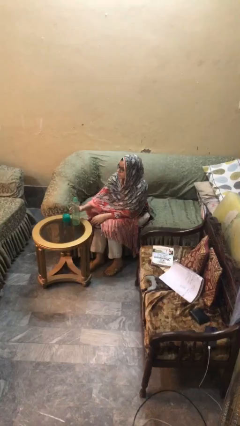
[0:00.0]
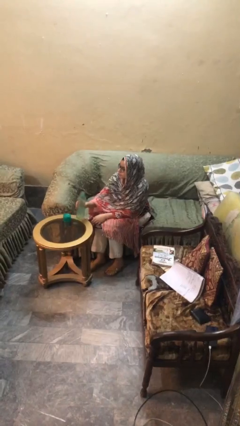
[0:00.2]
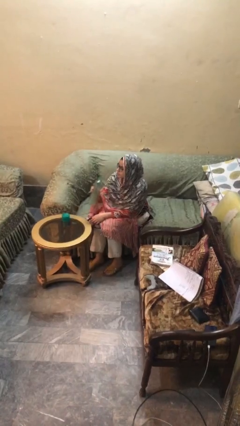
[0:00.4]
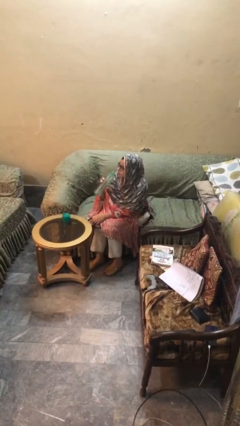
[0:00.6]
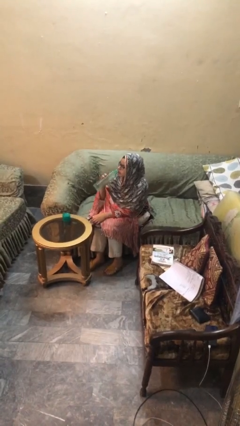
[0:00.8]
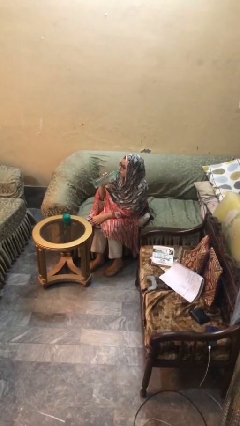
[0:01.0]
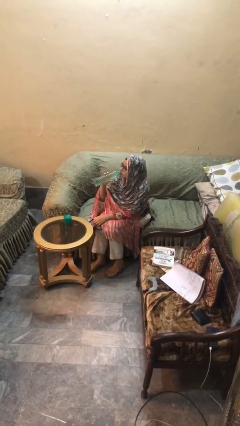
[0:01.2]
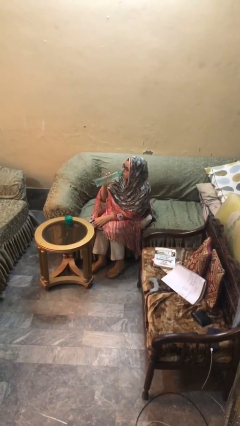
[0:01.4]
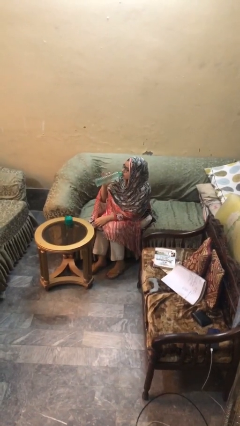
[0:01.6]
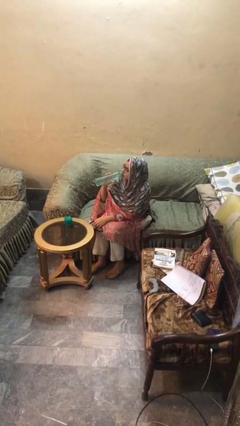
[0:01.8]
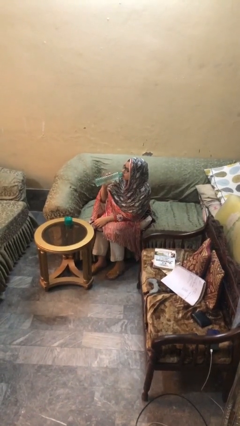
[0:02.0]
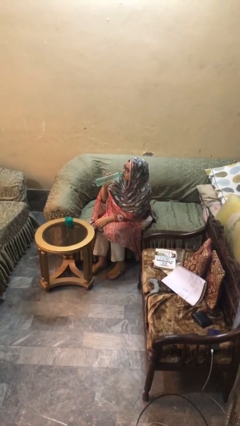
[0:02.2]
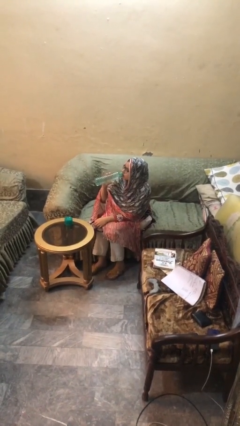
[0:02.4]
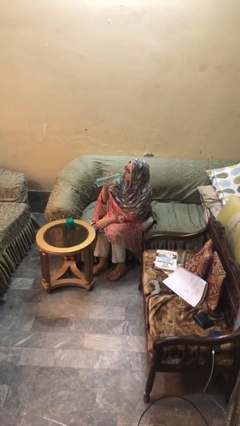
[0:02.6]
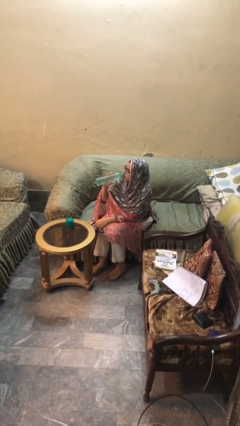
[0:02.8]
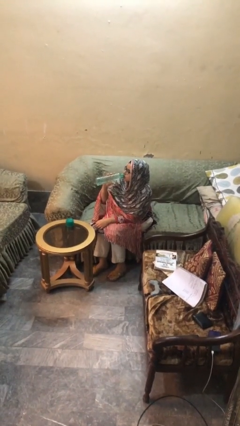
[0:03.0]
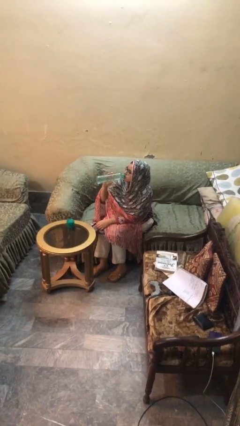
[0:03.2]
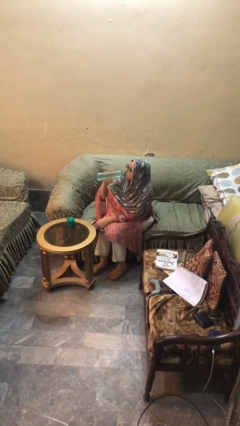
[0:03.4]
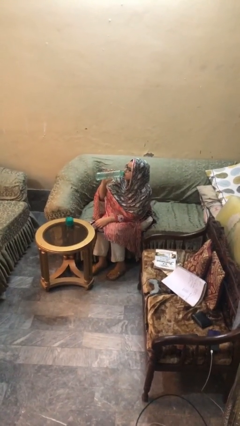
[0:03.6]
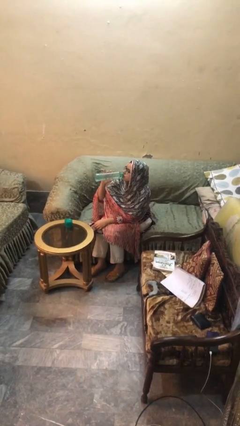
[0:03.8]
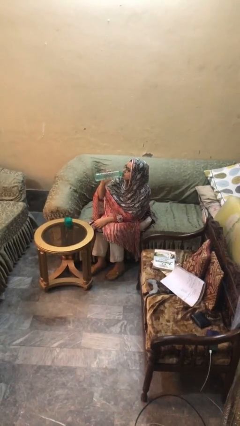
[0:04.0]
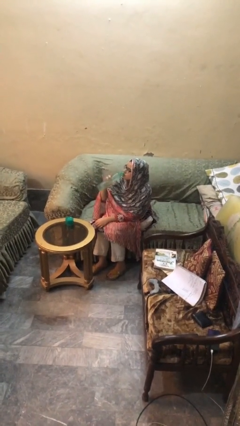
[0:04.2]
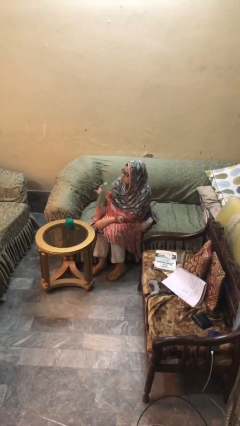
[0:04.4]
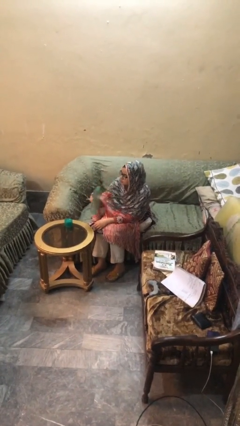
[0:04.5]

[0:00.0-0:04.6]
person drinks from bottle

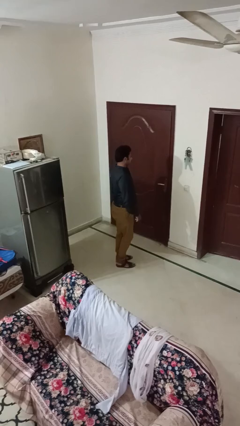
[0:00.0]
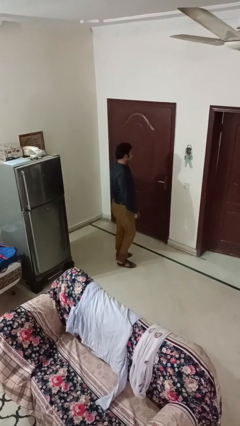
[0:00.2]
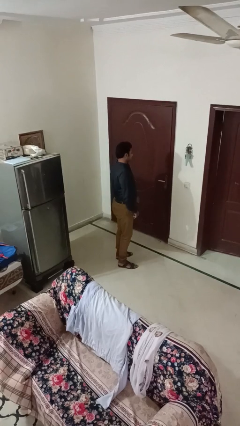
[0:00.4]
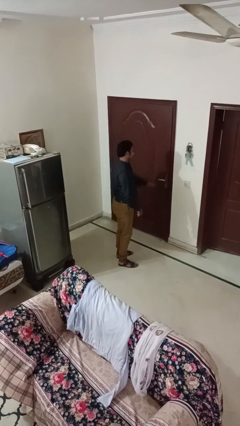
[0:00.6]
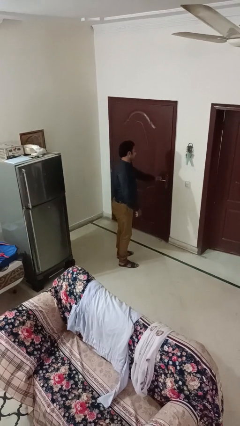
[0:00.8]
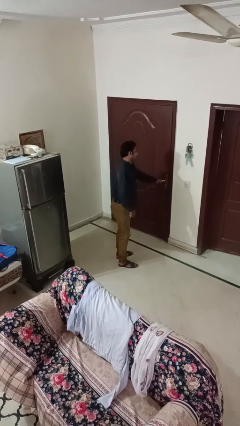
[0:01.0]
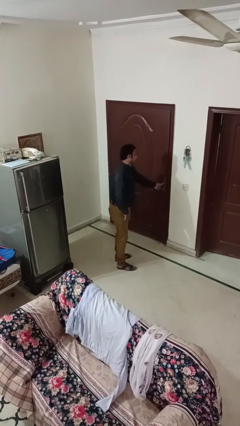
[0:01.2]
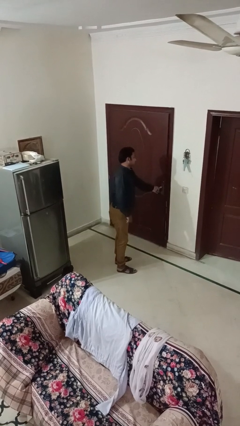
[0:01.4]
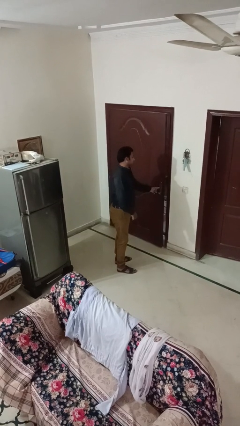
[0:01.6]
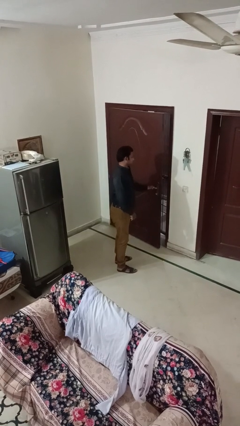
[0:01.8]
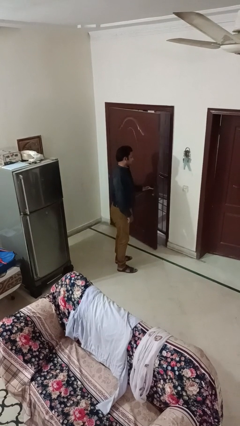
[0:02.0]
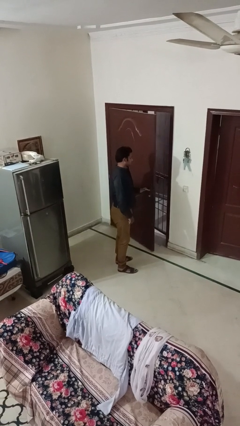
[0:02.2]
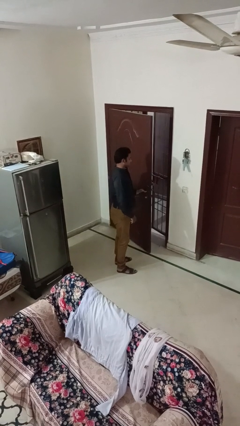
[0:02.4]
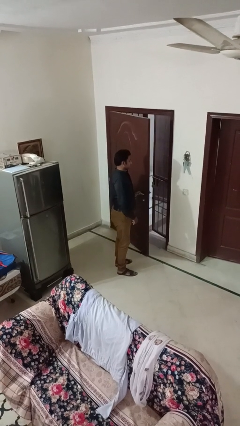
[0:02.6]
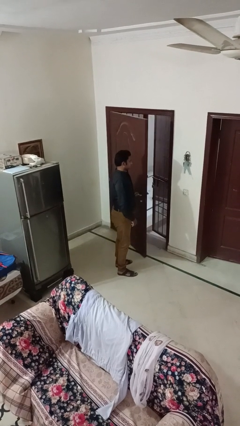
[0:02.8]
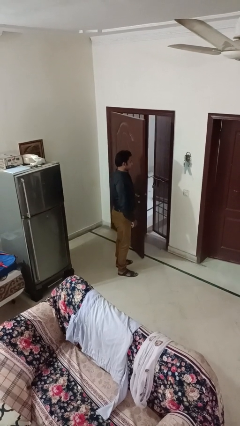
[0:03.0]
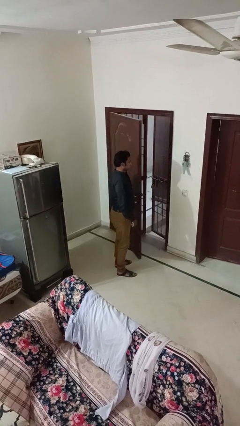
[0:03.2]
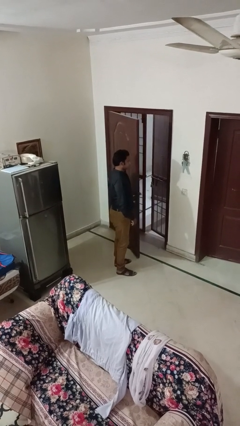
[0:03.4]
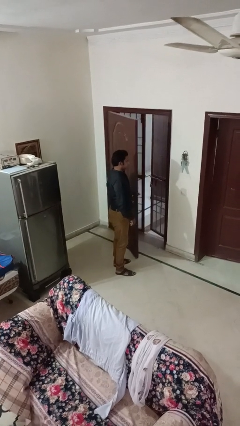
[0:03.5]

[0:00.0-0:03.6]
person opens facility door

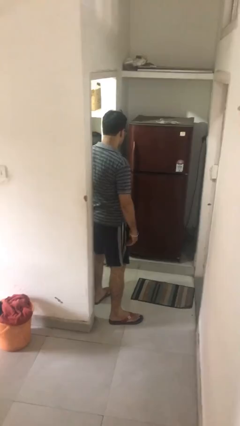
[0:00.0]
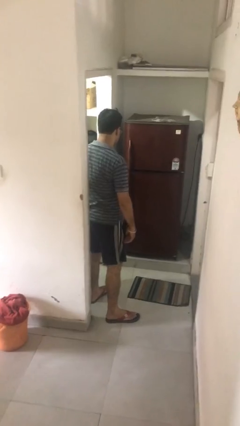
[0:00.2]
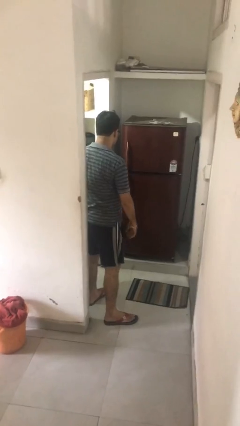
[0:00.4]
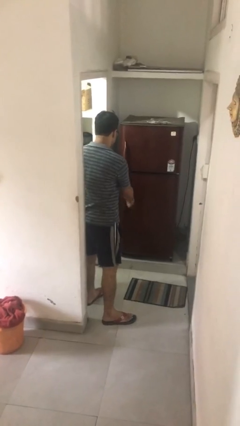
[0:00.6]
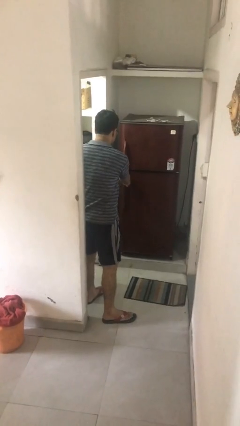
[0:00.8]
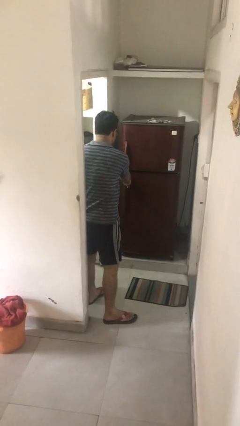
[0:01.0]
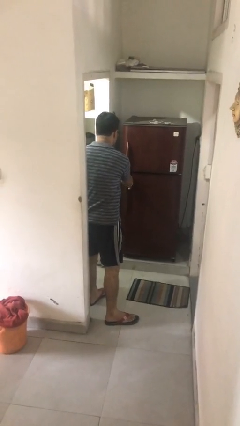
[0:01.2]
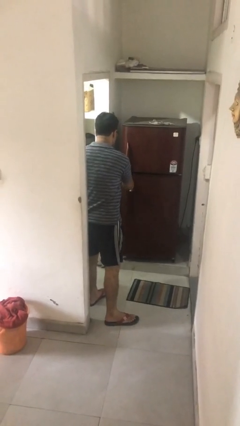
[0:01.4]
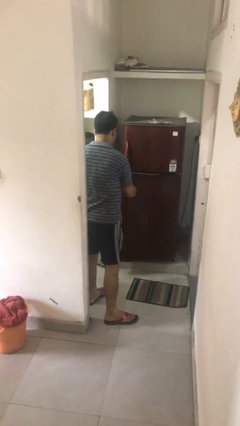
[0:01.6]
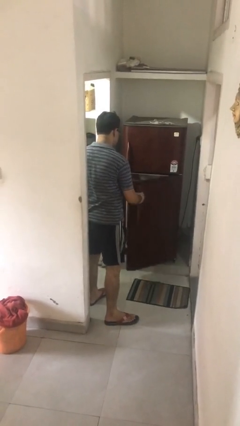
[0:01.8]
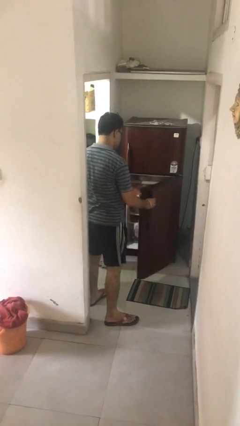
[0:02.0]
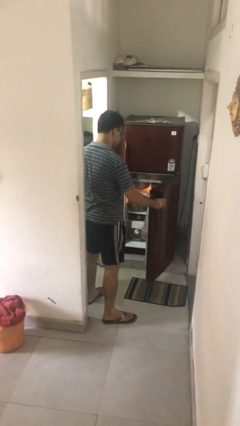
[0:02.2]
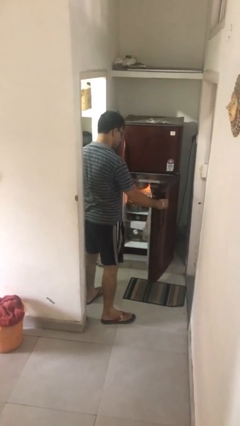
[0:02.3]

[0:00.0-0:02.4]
person opens refrigerator

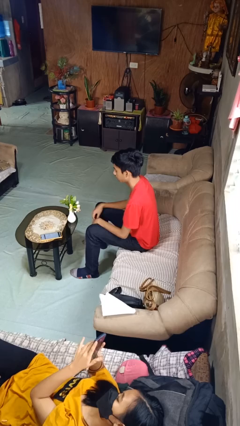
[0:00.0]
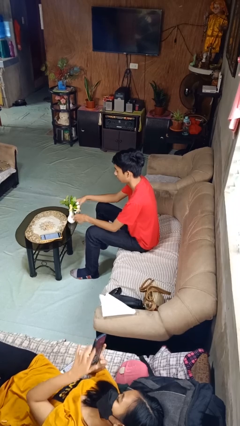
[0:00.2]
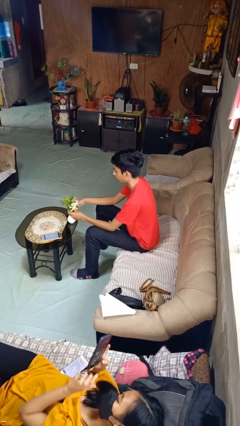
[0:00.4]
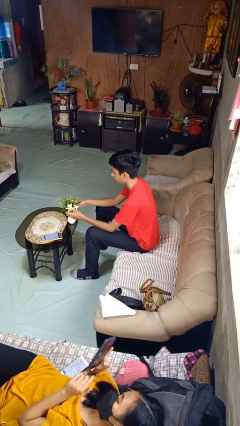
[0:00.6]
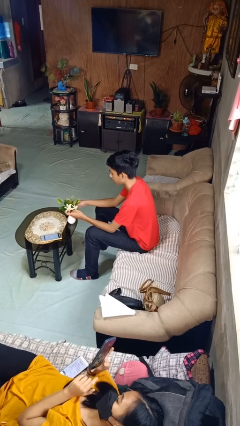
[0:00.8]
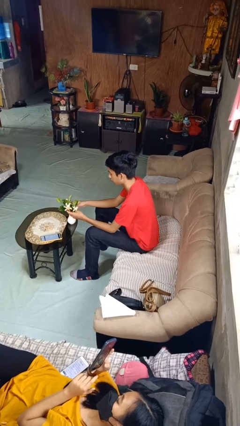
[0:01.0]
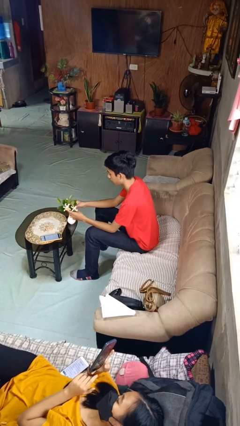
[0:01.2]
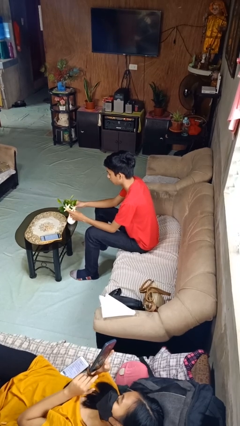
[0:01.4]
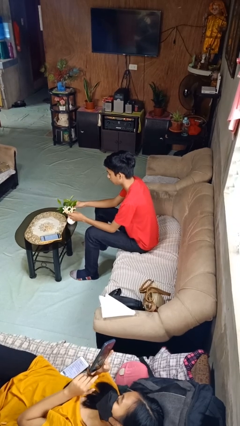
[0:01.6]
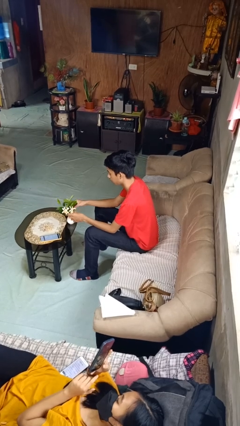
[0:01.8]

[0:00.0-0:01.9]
person arranges flowers in vase

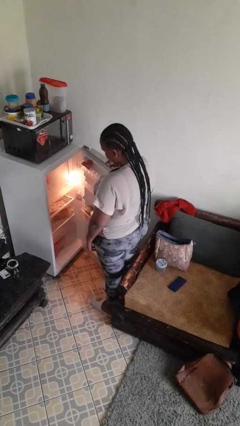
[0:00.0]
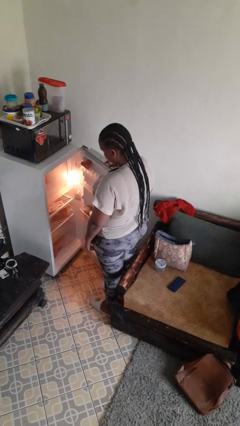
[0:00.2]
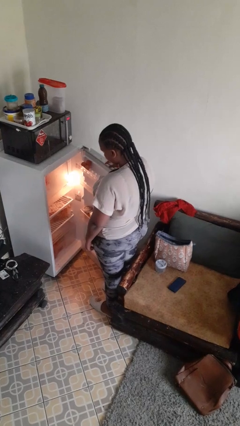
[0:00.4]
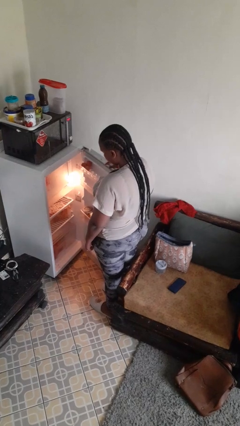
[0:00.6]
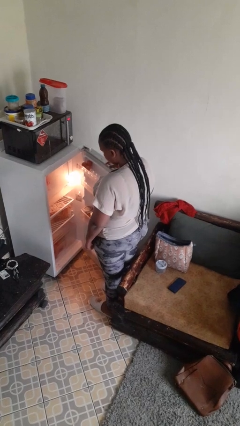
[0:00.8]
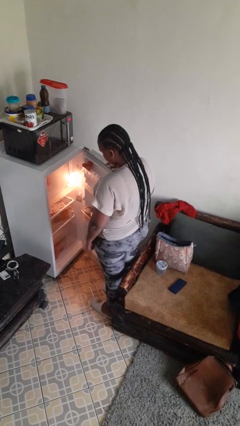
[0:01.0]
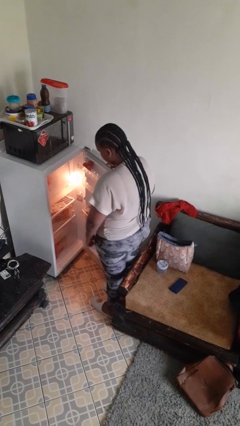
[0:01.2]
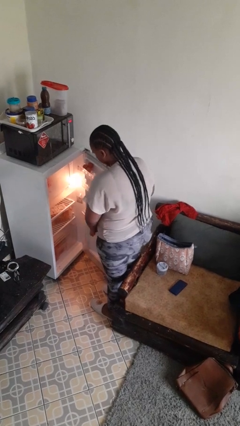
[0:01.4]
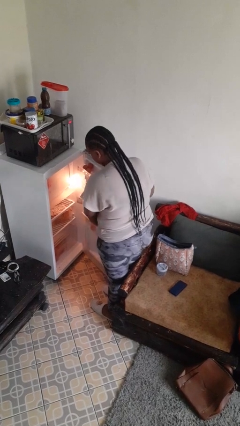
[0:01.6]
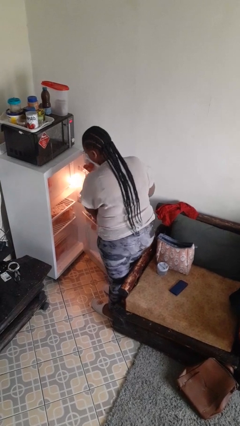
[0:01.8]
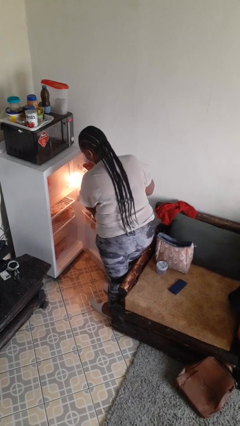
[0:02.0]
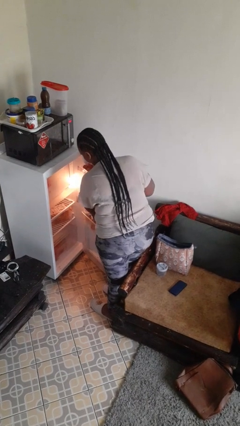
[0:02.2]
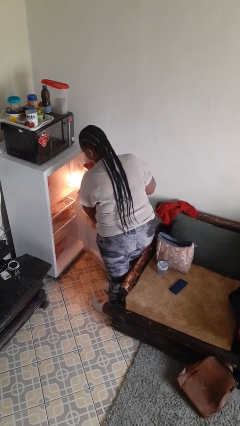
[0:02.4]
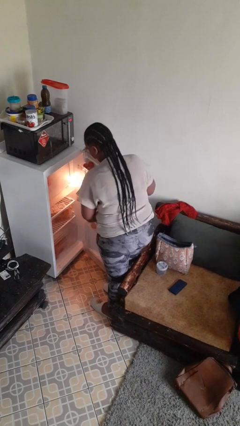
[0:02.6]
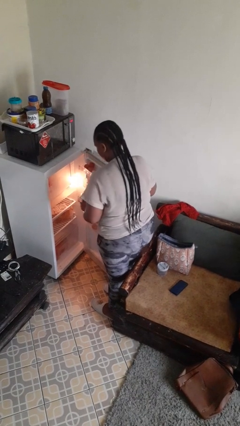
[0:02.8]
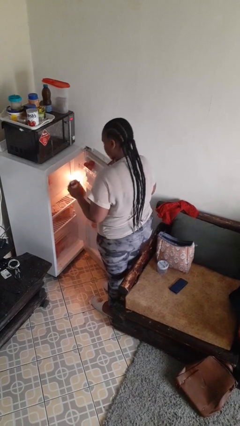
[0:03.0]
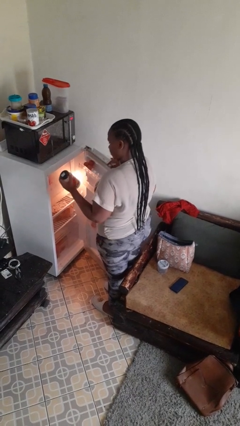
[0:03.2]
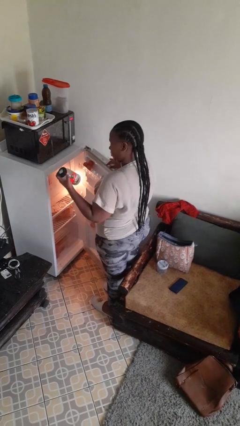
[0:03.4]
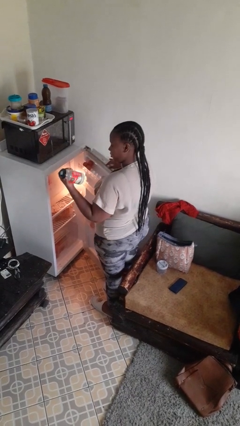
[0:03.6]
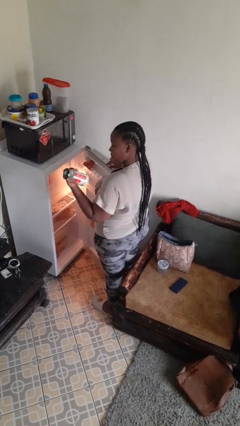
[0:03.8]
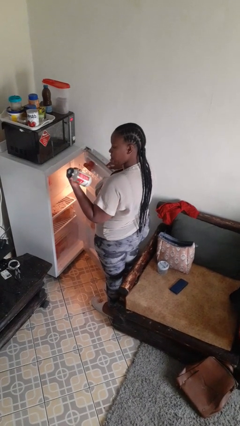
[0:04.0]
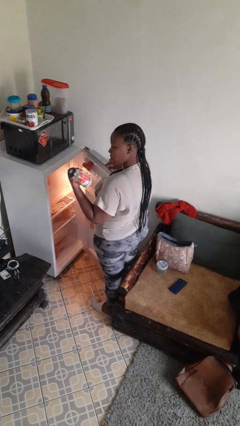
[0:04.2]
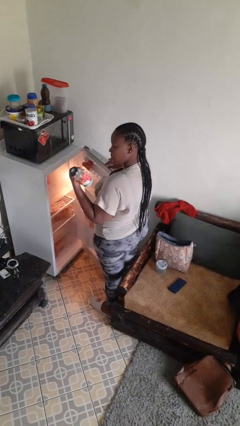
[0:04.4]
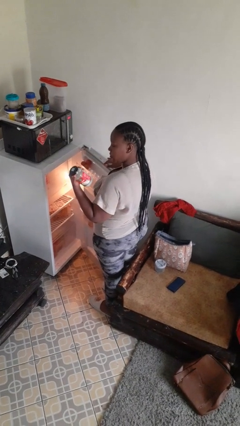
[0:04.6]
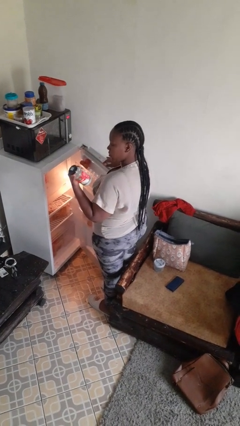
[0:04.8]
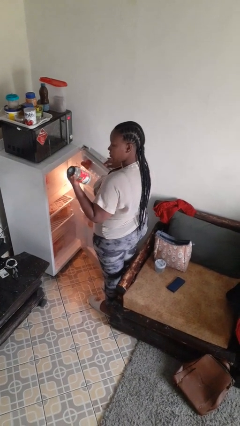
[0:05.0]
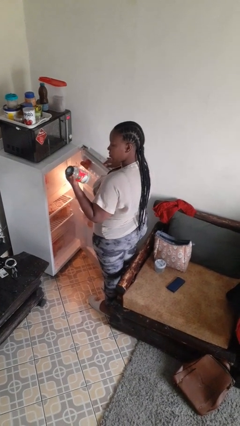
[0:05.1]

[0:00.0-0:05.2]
person takes object from refrigerator
